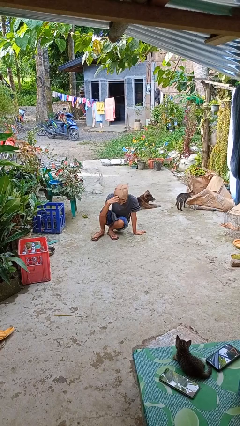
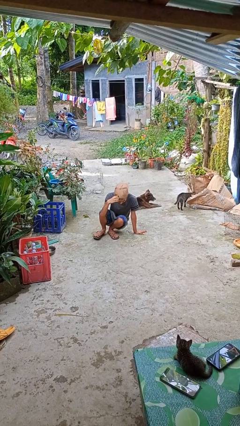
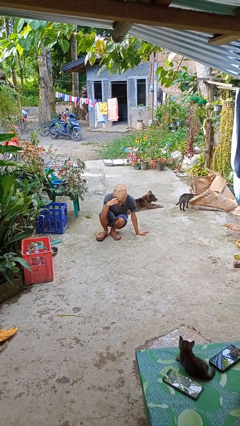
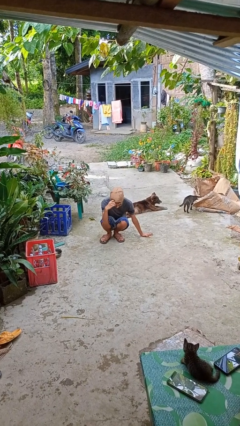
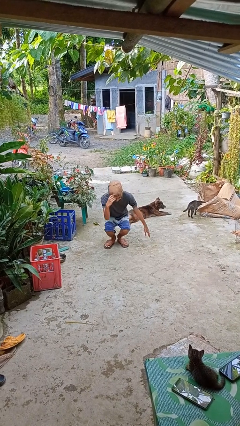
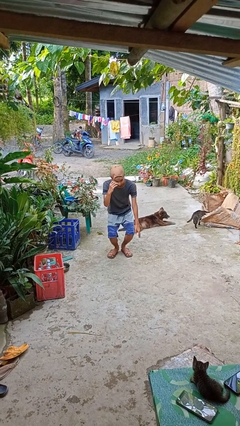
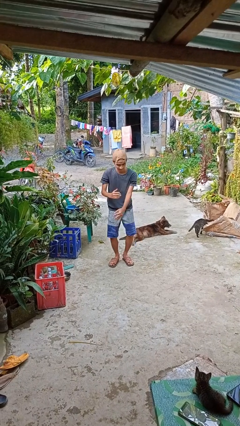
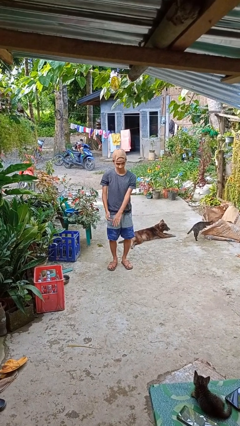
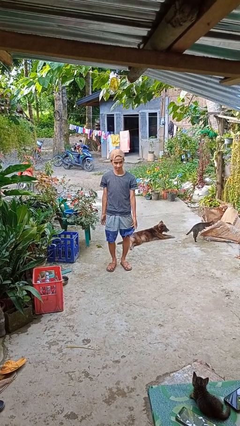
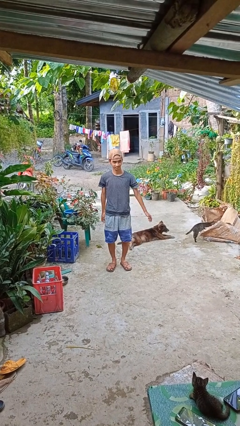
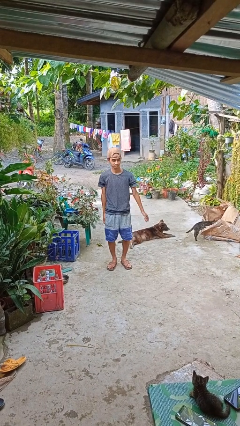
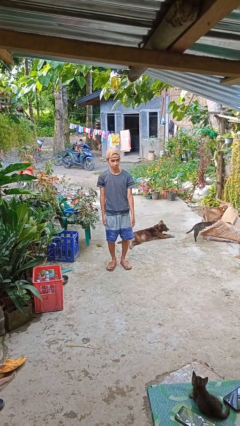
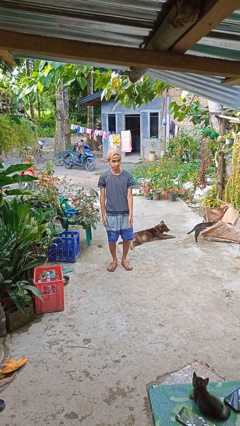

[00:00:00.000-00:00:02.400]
person stands up from floor

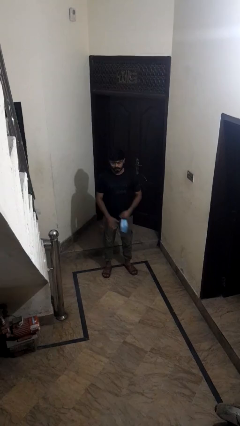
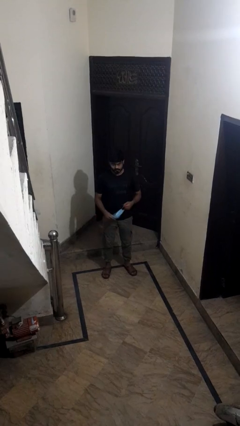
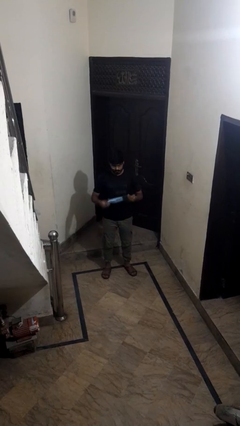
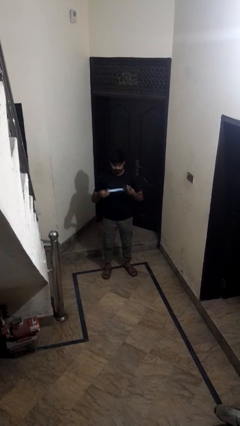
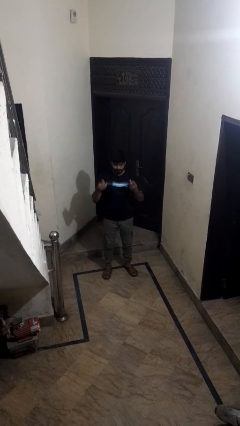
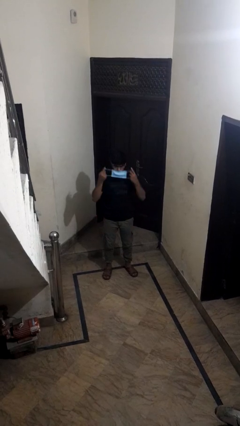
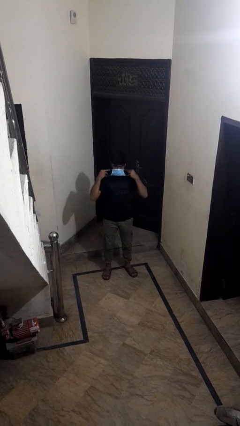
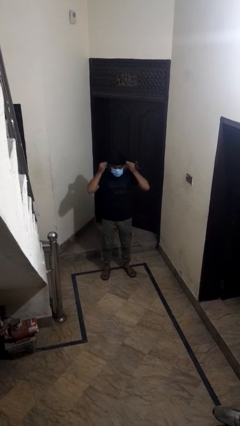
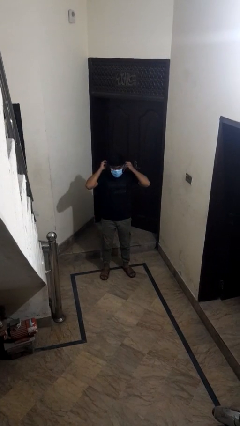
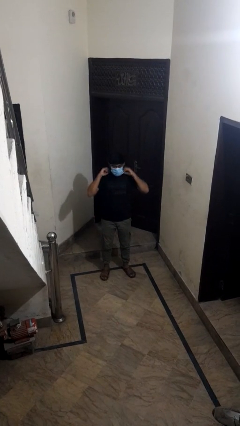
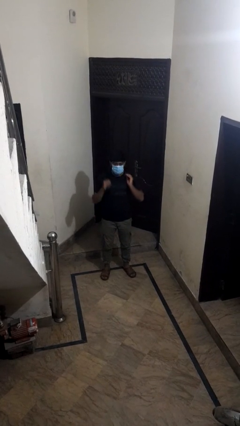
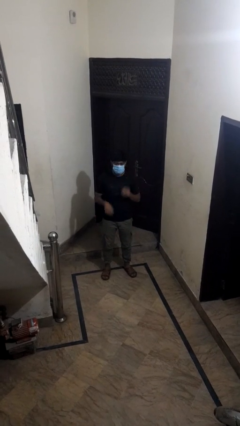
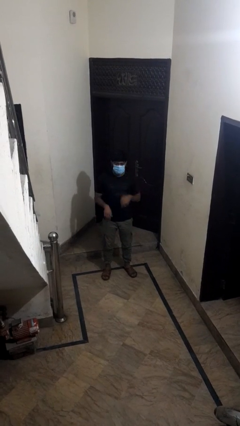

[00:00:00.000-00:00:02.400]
person puts on facemask

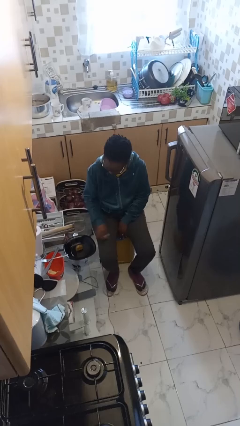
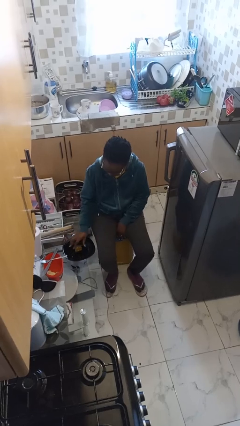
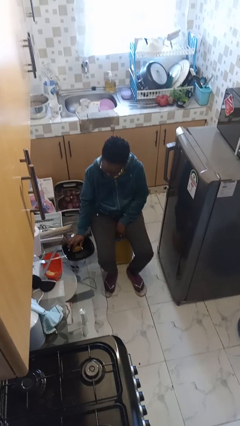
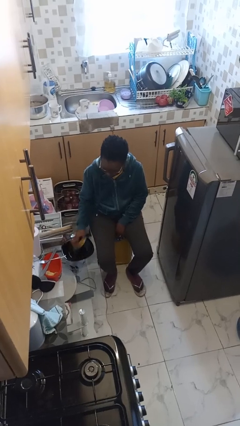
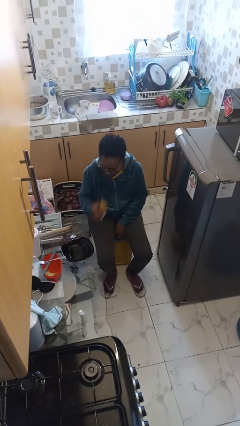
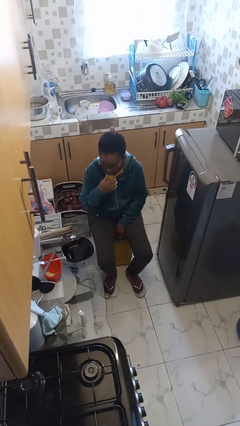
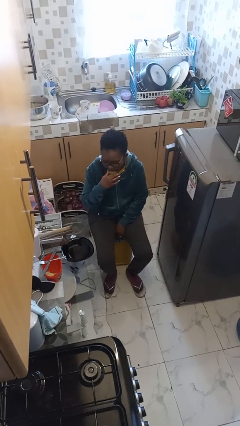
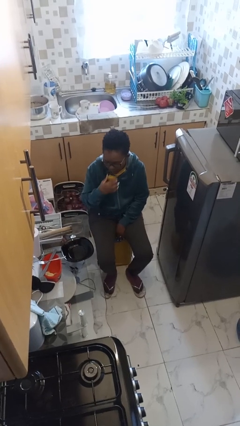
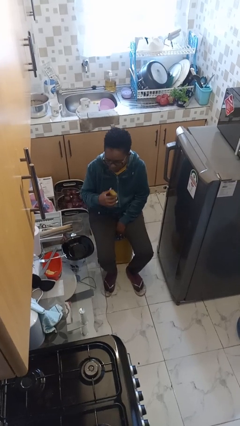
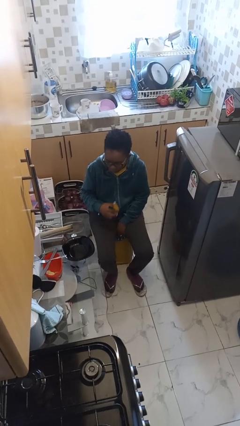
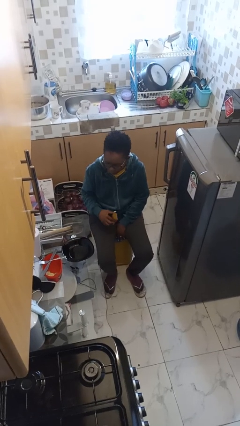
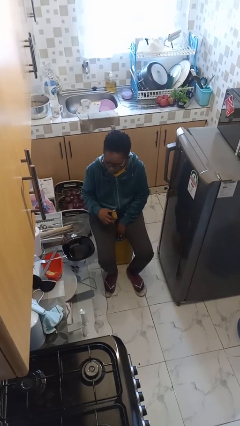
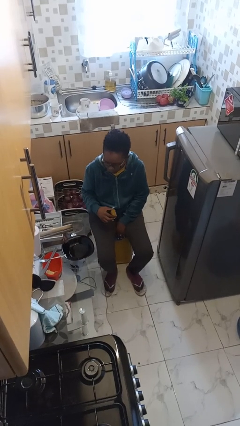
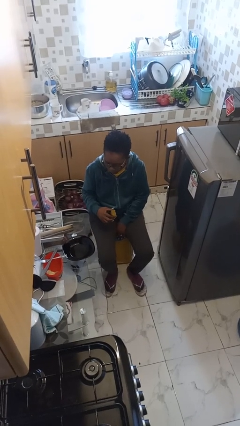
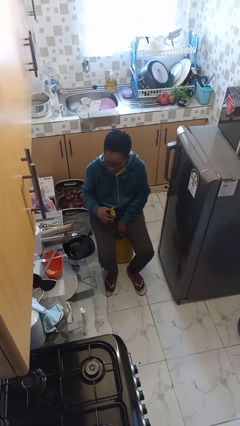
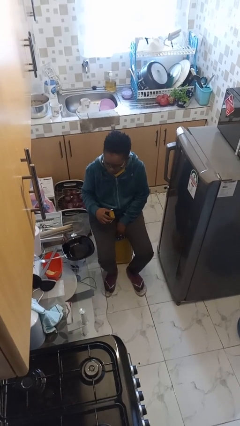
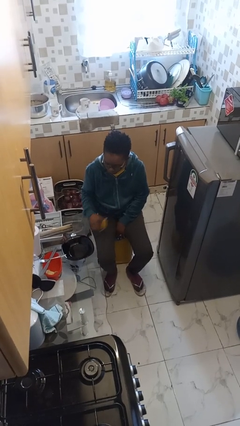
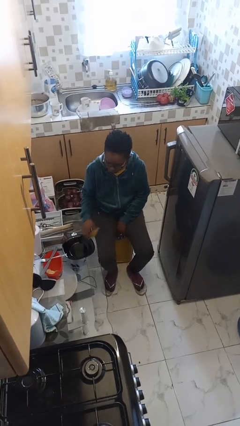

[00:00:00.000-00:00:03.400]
person eats with hands

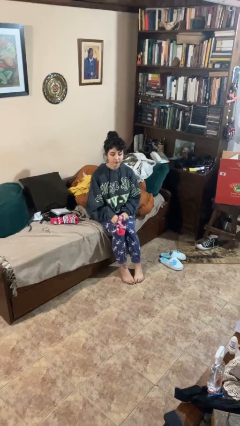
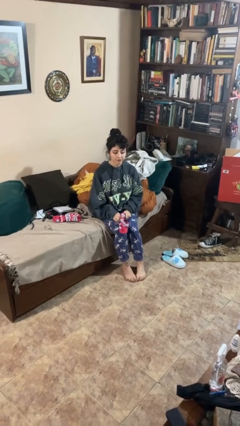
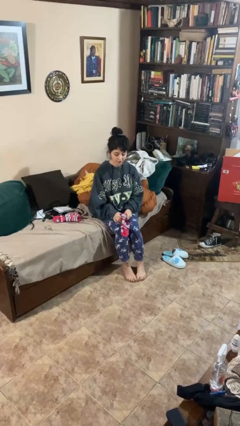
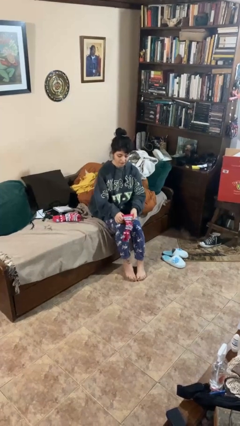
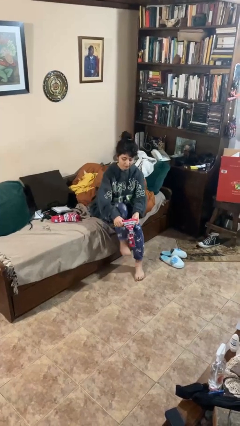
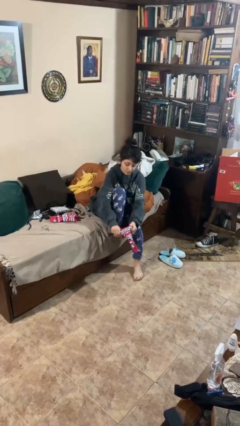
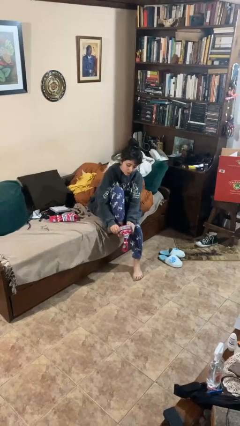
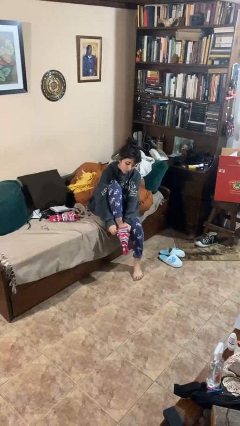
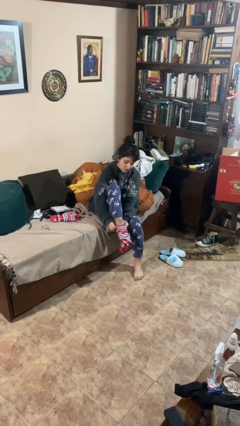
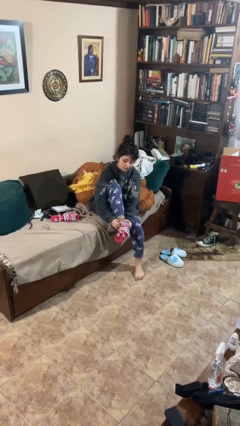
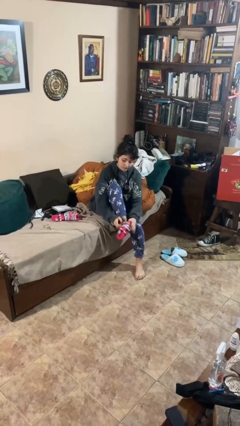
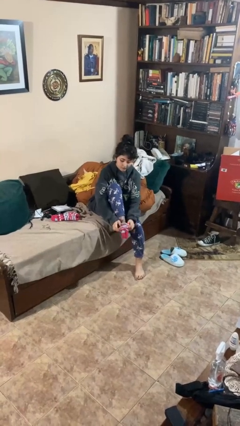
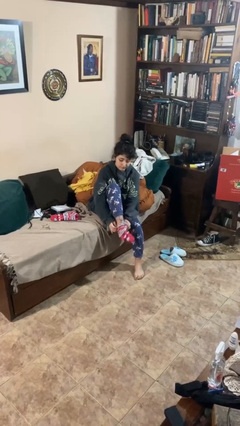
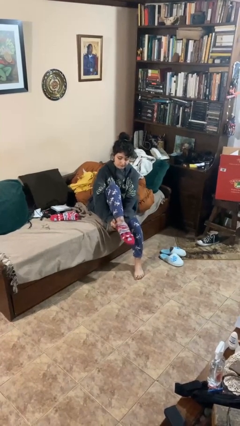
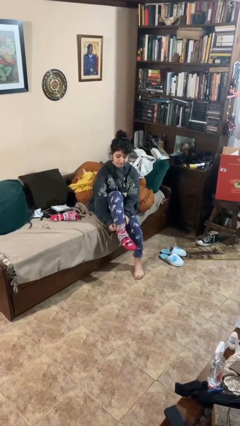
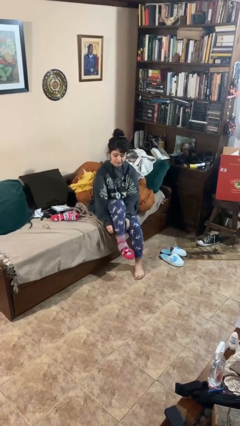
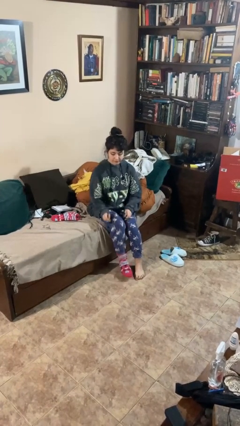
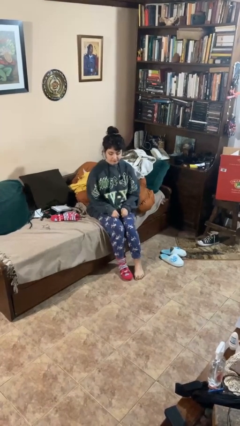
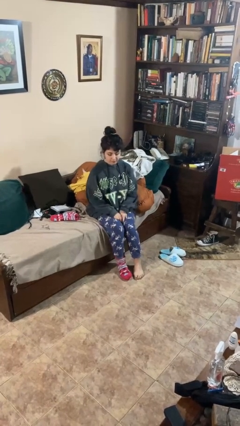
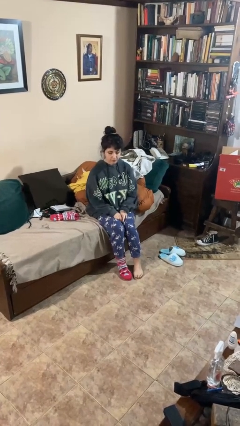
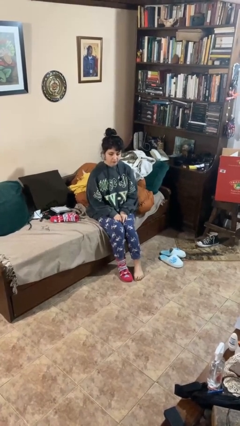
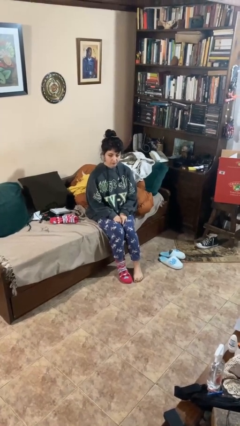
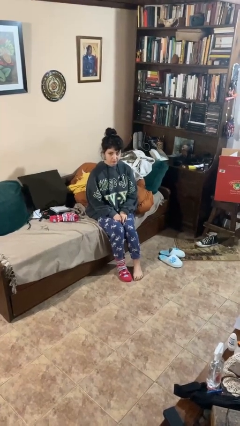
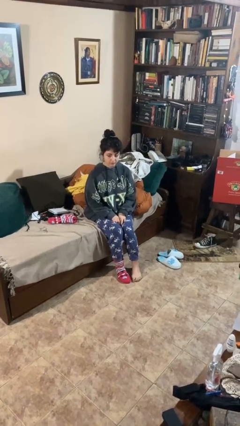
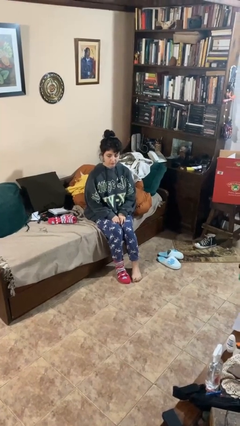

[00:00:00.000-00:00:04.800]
person puts on socks

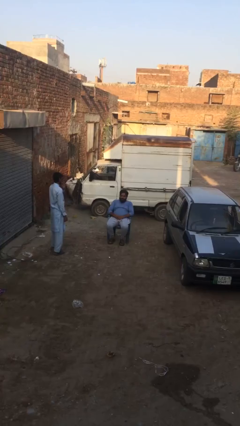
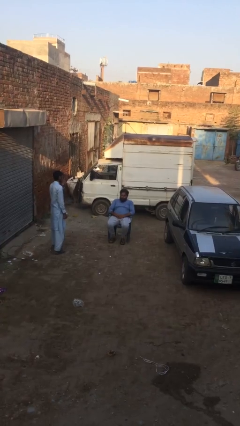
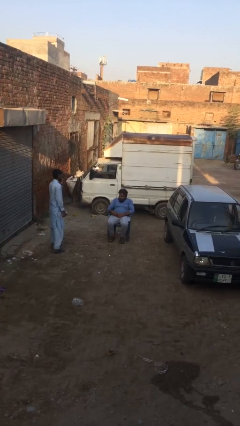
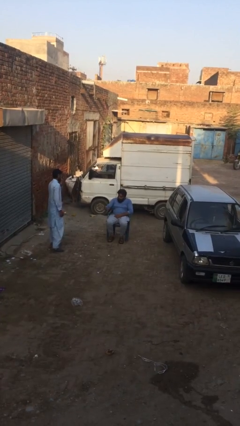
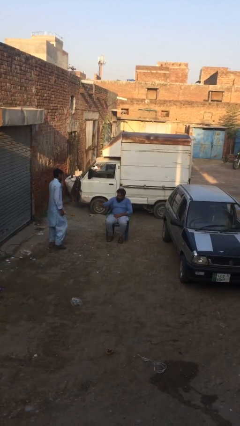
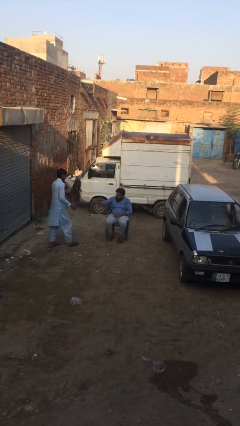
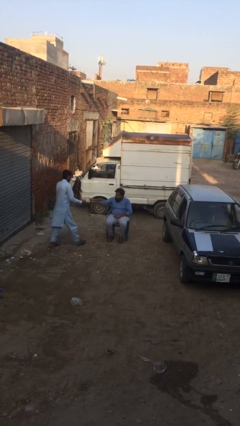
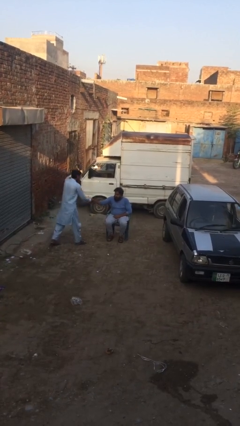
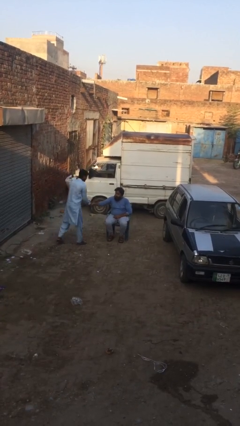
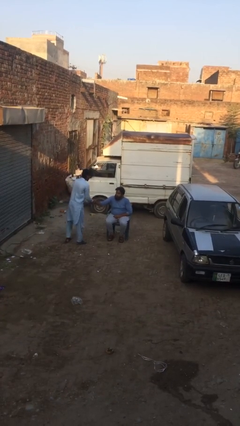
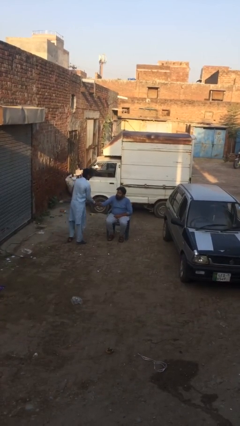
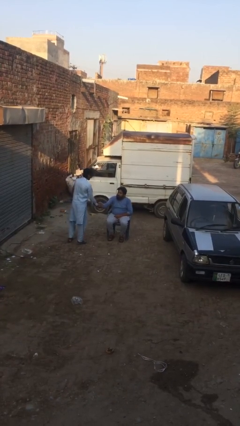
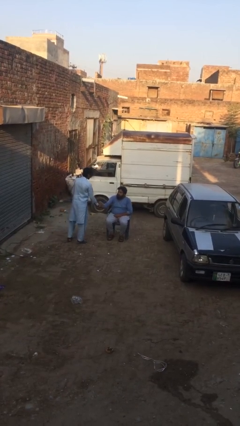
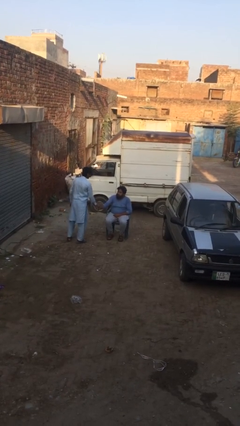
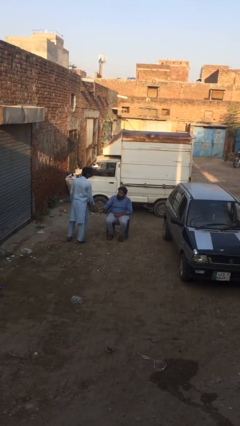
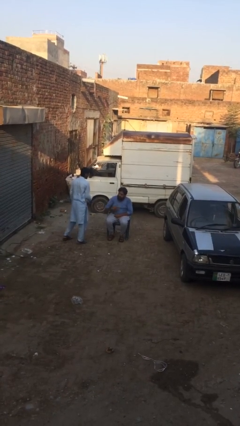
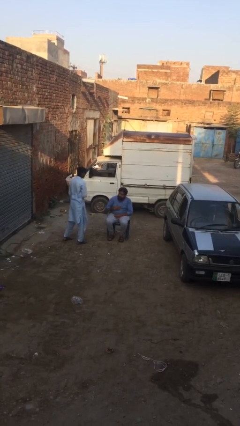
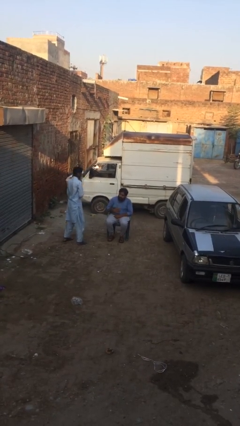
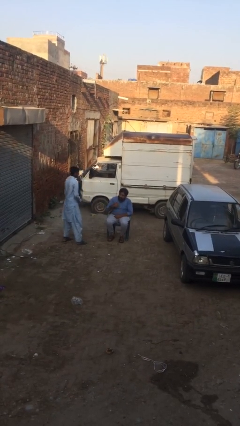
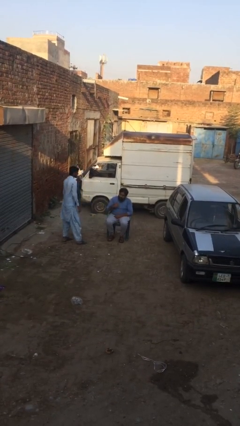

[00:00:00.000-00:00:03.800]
person shakes hand

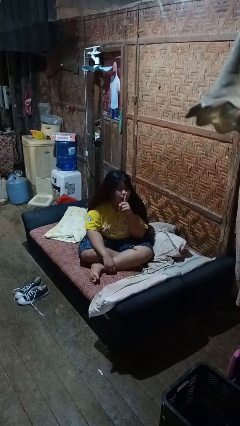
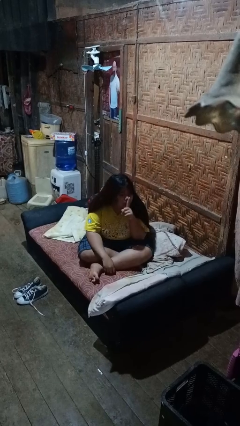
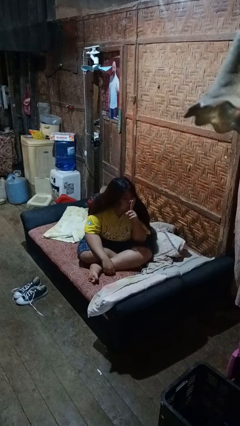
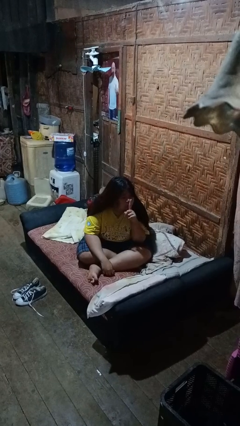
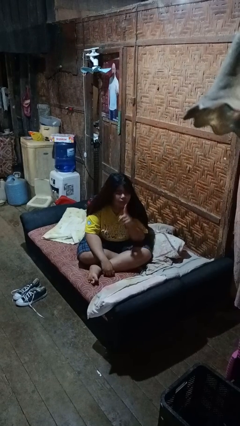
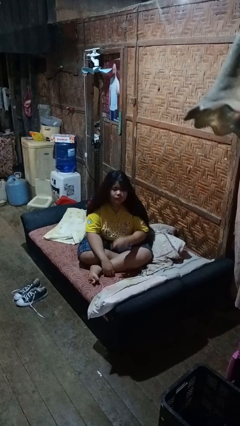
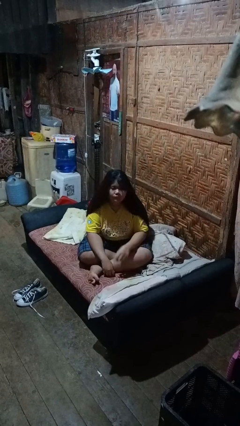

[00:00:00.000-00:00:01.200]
person gestures be quiet
